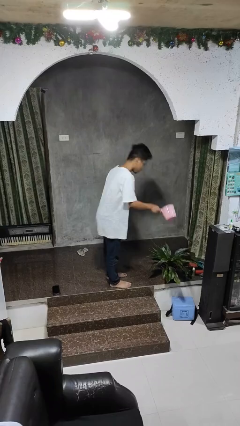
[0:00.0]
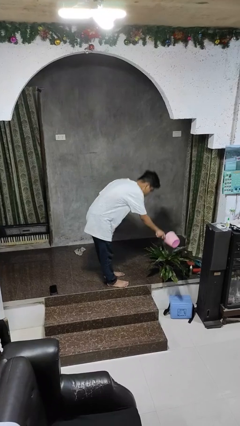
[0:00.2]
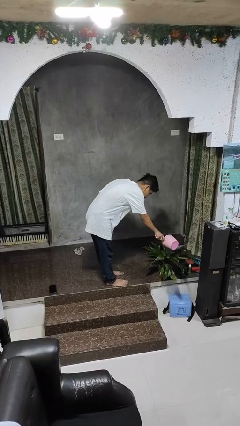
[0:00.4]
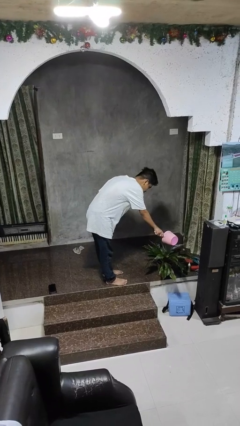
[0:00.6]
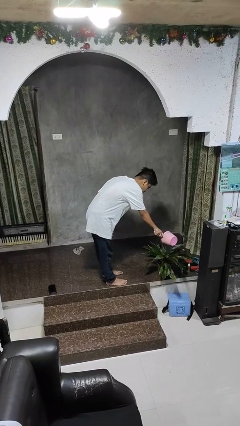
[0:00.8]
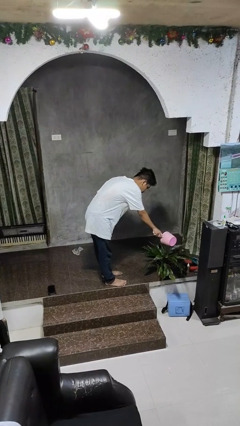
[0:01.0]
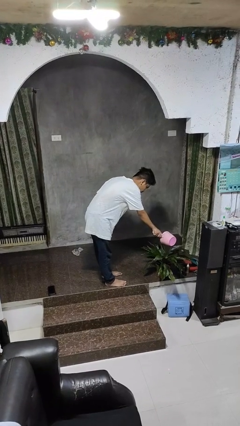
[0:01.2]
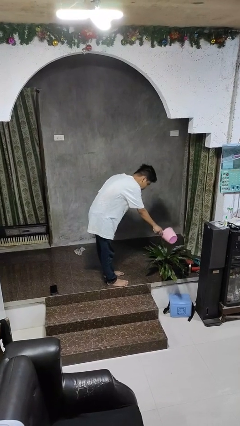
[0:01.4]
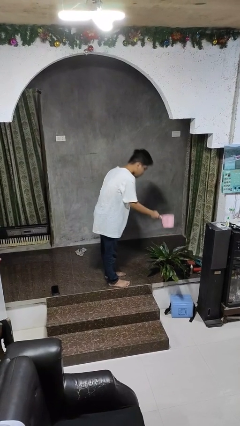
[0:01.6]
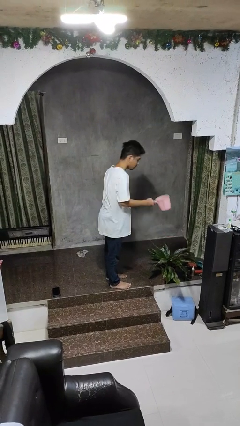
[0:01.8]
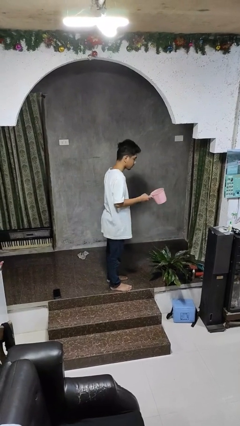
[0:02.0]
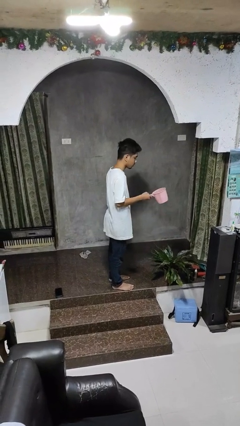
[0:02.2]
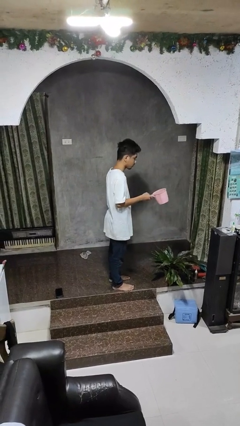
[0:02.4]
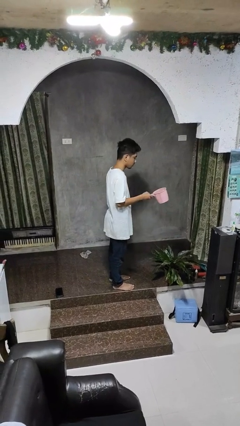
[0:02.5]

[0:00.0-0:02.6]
person waters houseplant

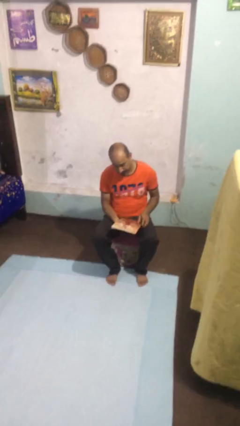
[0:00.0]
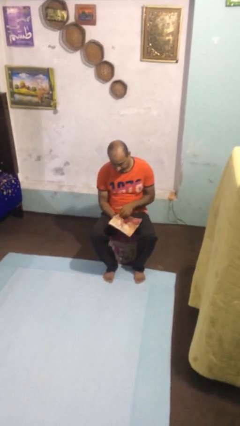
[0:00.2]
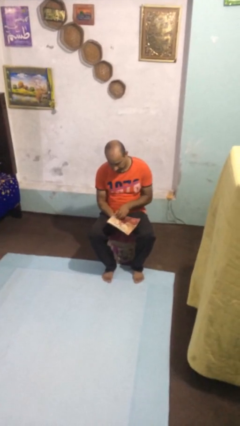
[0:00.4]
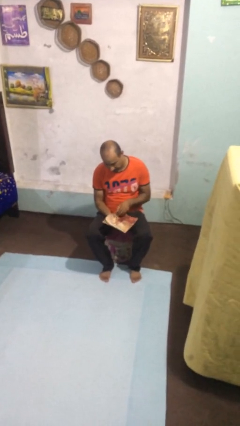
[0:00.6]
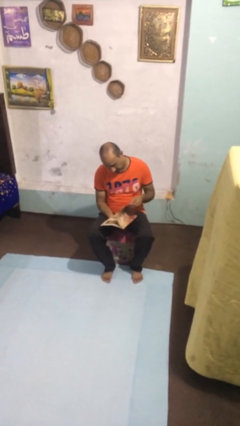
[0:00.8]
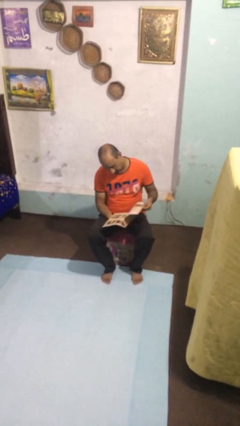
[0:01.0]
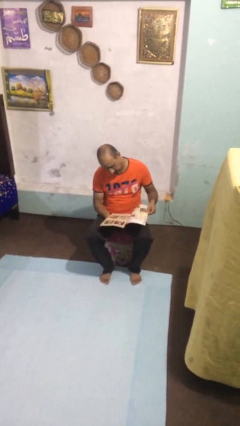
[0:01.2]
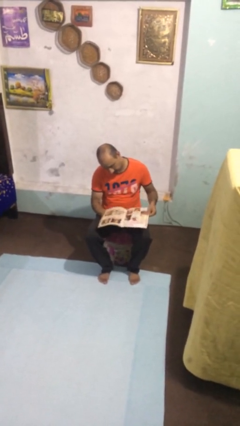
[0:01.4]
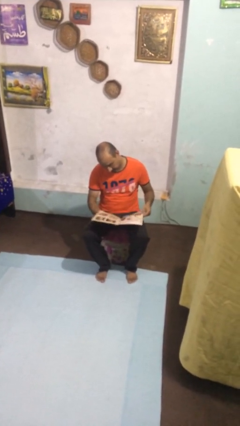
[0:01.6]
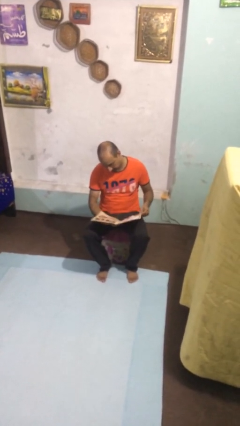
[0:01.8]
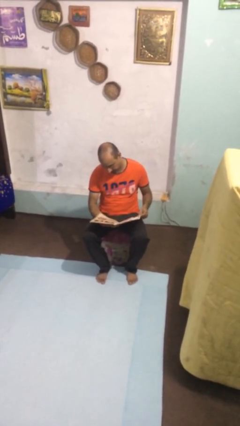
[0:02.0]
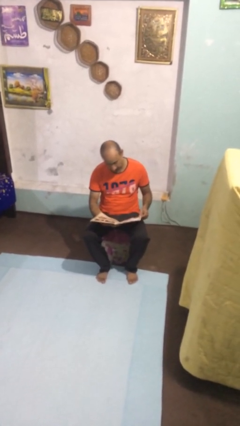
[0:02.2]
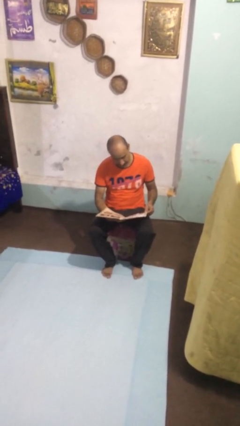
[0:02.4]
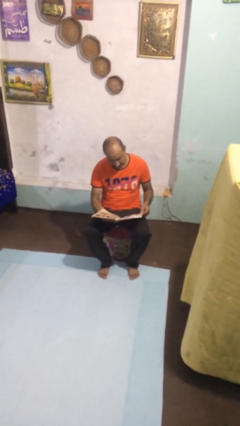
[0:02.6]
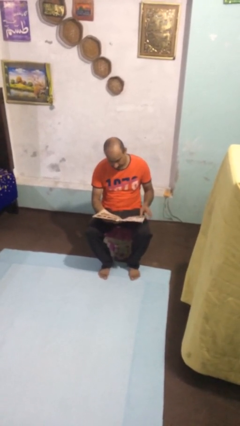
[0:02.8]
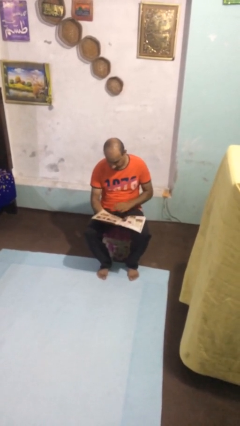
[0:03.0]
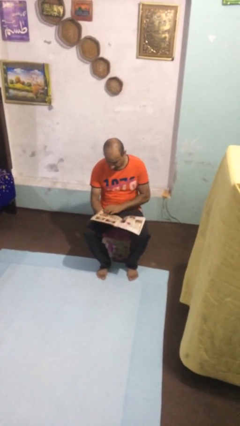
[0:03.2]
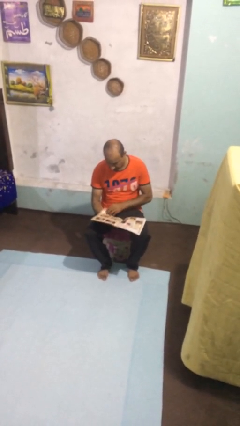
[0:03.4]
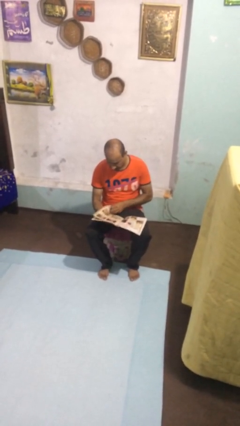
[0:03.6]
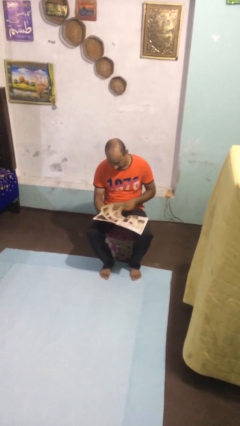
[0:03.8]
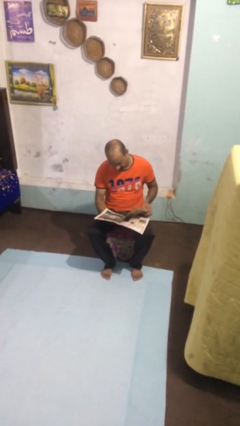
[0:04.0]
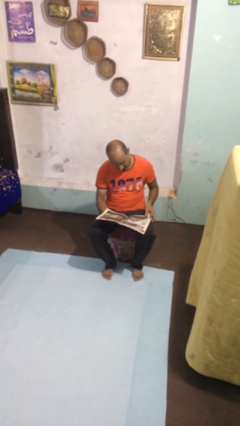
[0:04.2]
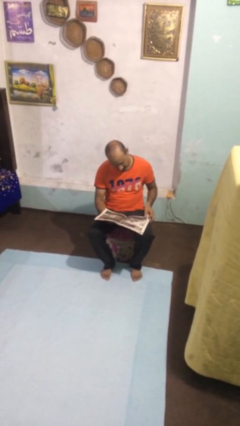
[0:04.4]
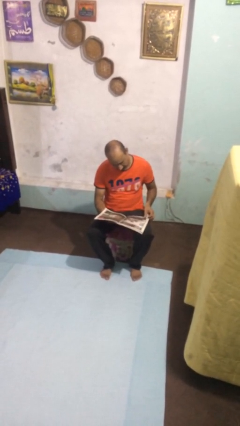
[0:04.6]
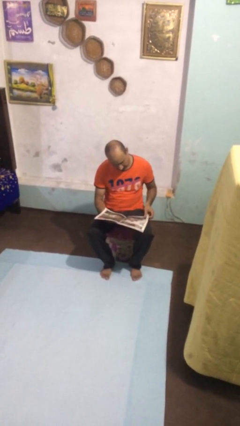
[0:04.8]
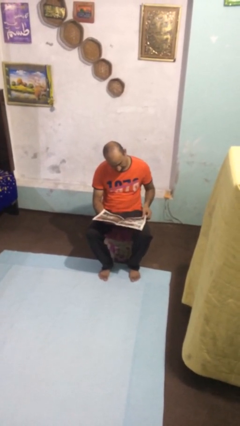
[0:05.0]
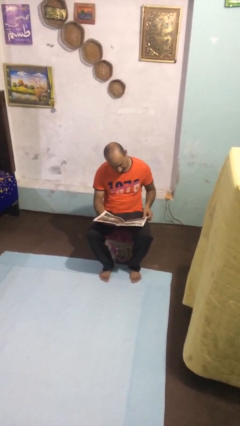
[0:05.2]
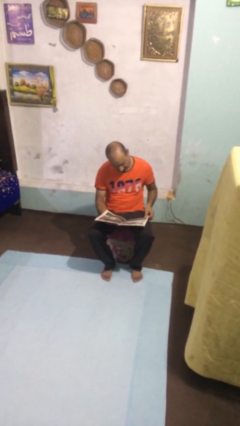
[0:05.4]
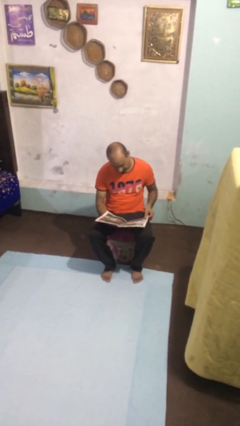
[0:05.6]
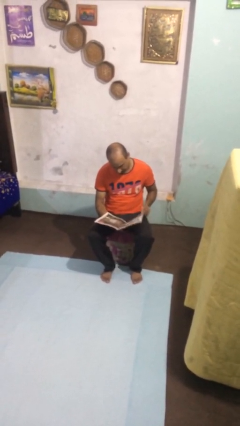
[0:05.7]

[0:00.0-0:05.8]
person reads document

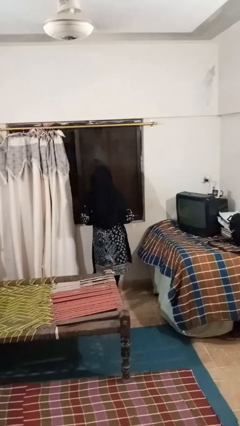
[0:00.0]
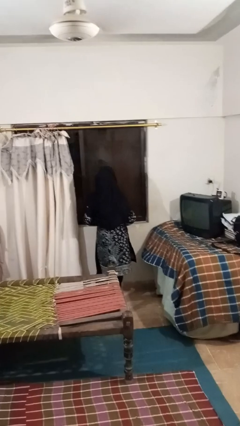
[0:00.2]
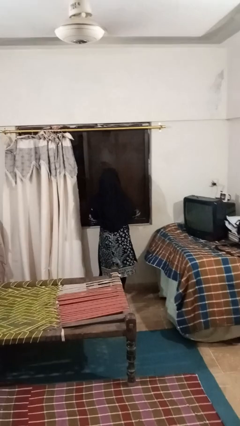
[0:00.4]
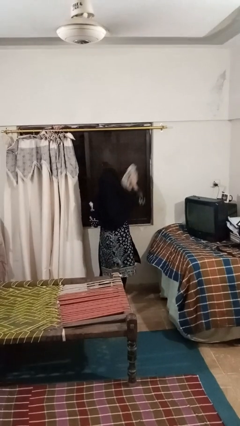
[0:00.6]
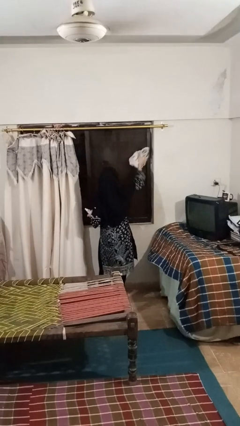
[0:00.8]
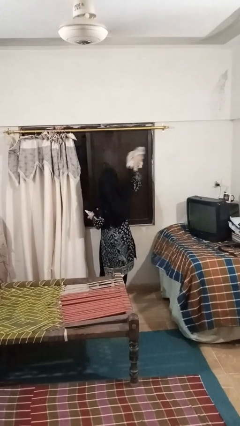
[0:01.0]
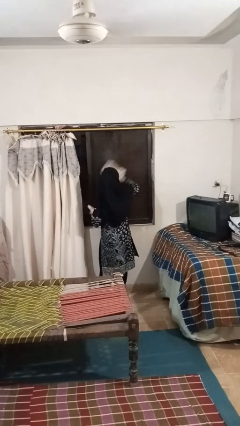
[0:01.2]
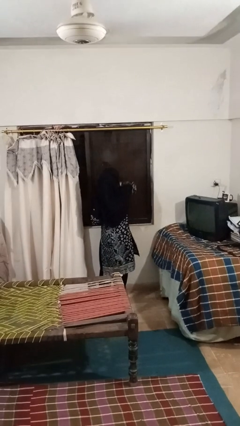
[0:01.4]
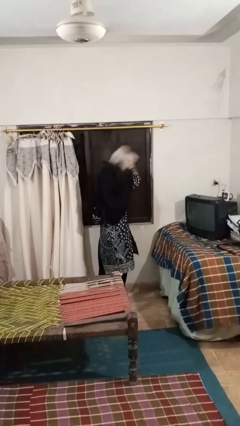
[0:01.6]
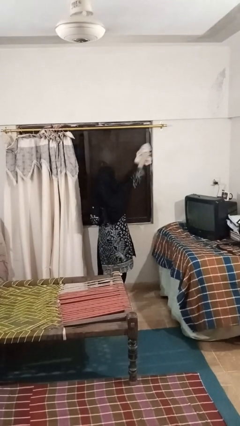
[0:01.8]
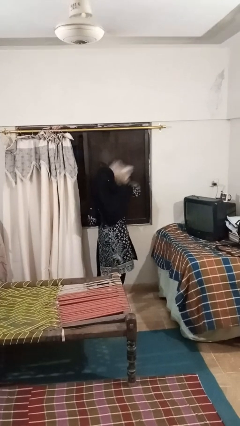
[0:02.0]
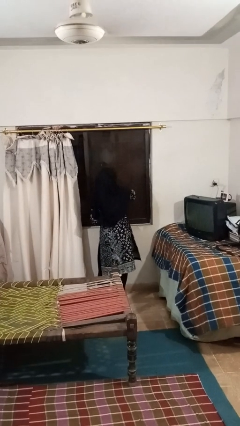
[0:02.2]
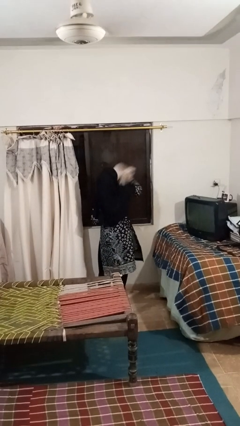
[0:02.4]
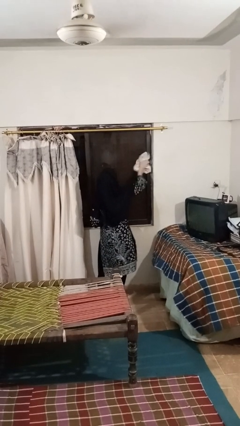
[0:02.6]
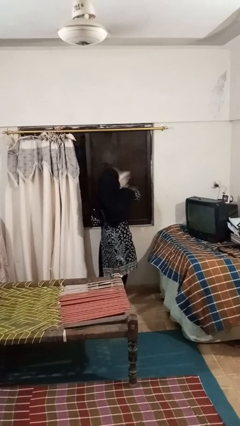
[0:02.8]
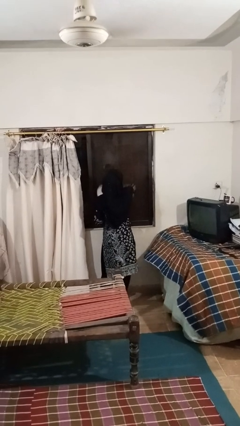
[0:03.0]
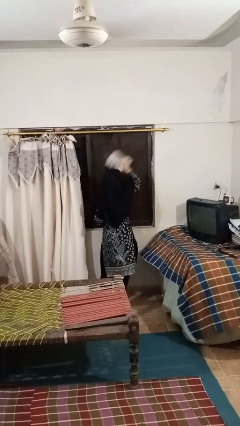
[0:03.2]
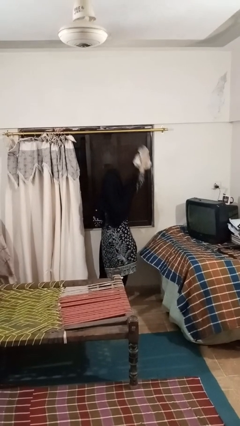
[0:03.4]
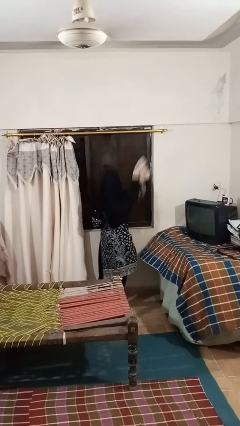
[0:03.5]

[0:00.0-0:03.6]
person washes window

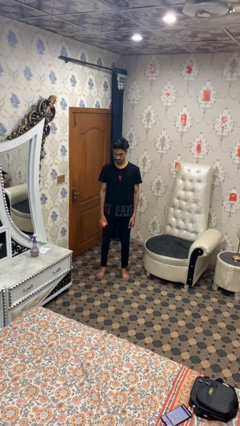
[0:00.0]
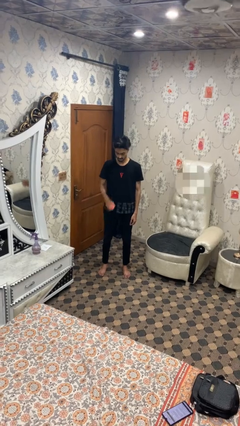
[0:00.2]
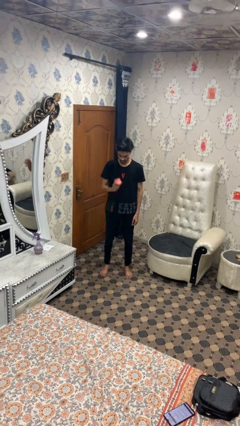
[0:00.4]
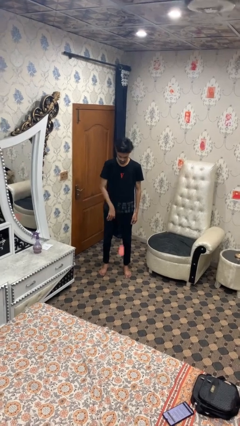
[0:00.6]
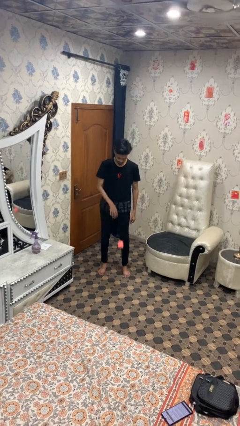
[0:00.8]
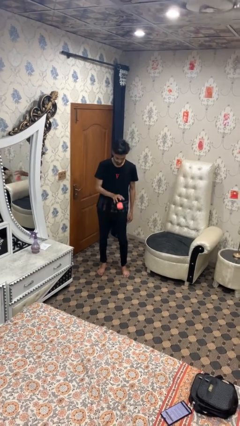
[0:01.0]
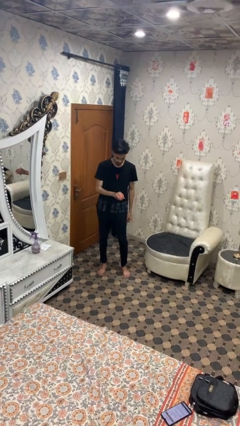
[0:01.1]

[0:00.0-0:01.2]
person bounces ball on floor

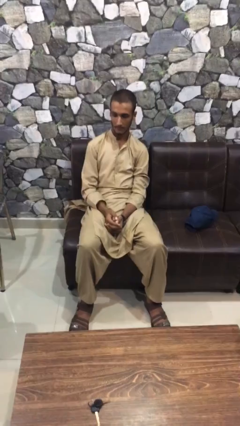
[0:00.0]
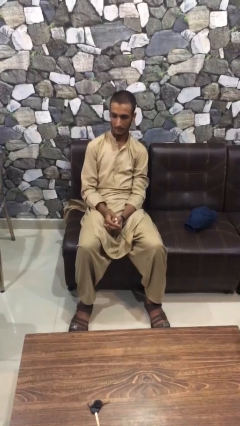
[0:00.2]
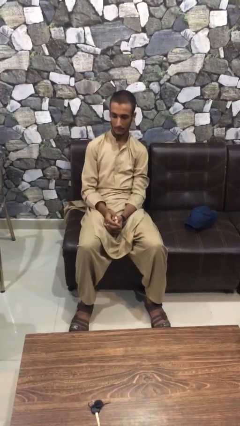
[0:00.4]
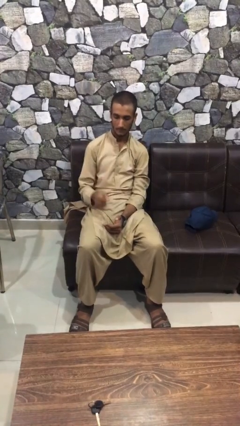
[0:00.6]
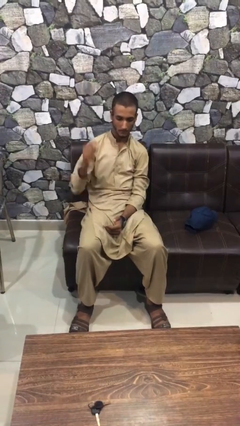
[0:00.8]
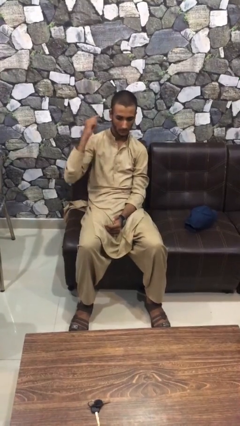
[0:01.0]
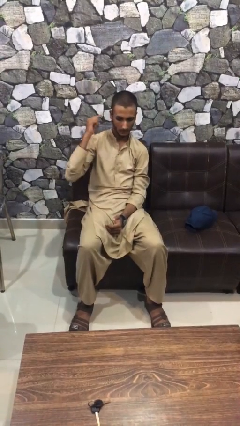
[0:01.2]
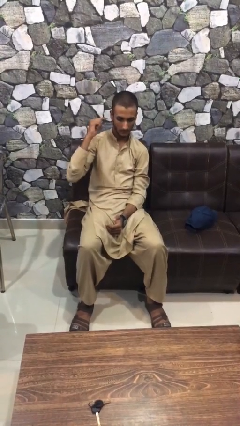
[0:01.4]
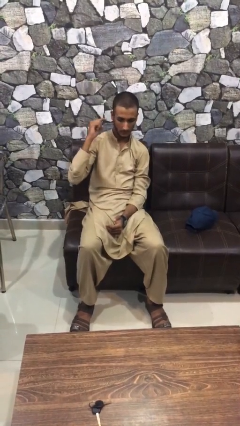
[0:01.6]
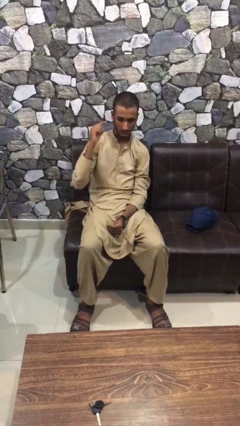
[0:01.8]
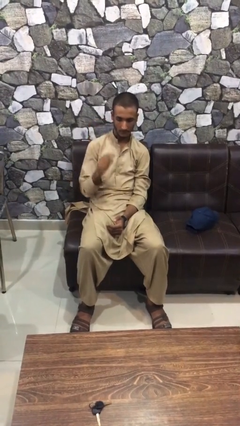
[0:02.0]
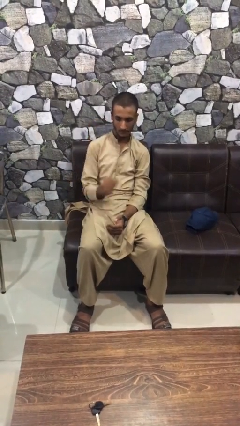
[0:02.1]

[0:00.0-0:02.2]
person gestures listen closely

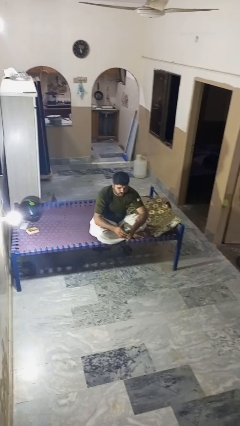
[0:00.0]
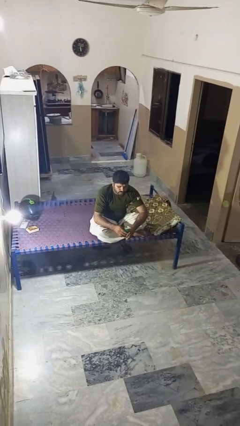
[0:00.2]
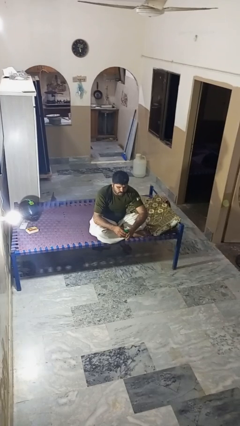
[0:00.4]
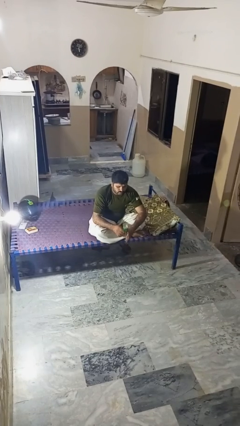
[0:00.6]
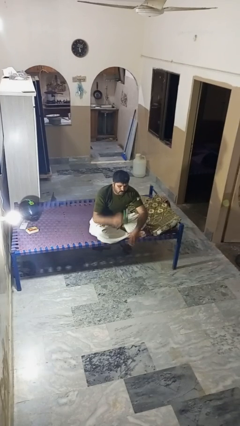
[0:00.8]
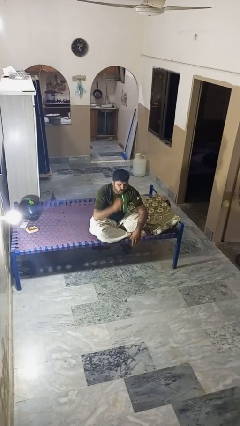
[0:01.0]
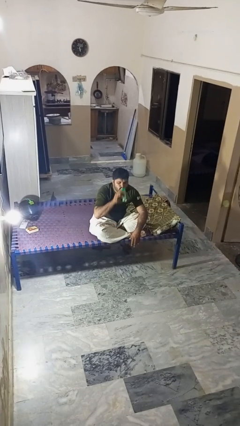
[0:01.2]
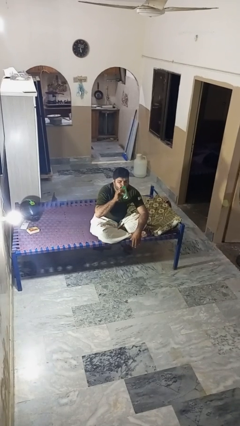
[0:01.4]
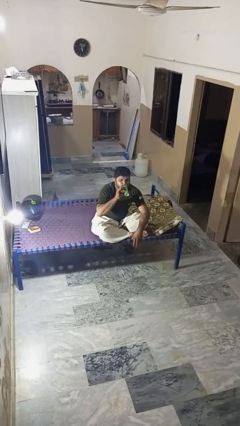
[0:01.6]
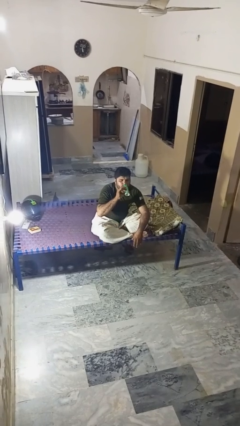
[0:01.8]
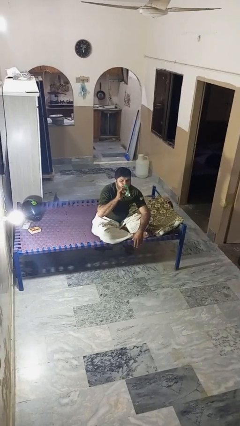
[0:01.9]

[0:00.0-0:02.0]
person drinks from beverage can

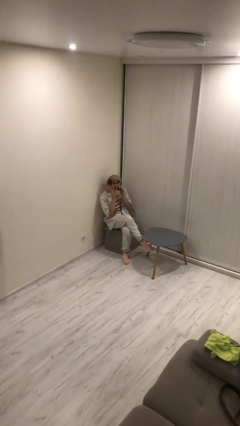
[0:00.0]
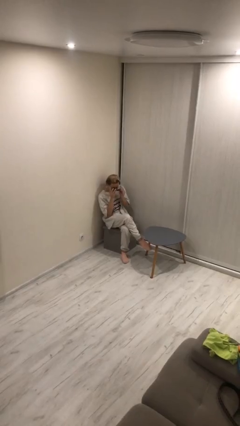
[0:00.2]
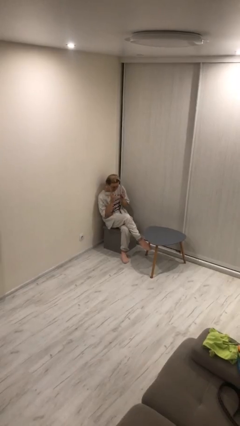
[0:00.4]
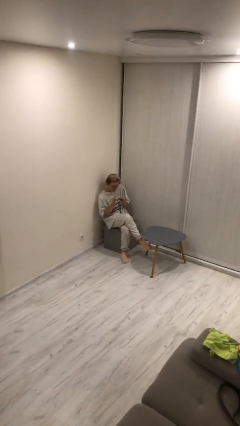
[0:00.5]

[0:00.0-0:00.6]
person takes off sunglasses
